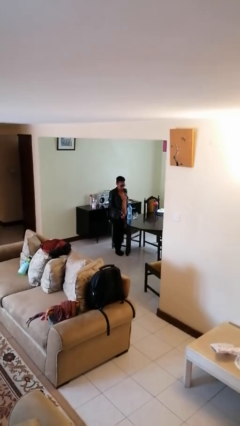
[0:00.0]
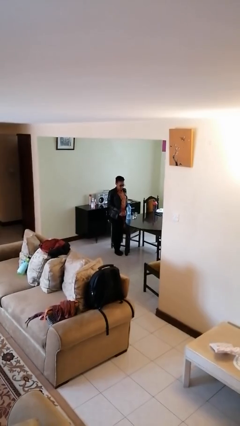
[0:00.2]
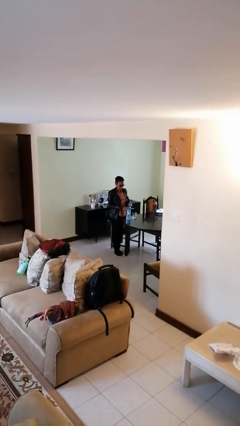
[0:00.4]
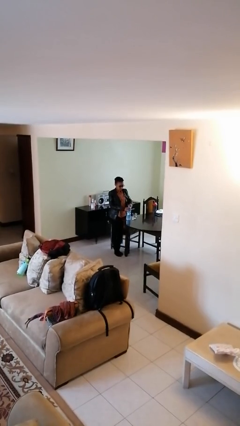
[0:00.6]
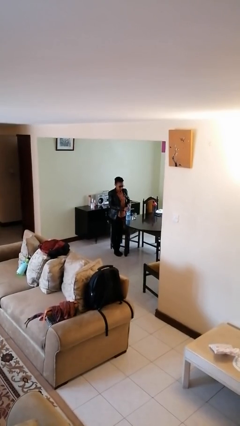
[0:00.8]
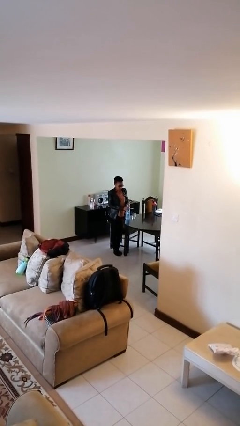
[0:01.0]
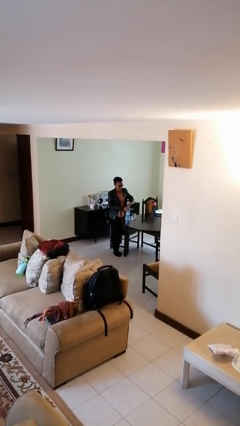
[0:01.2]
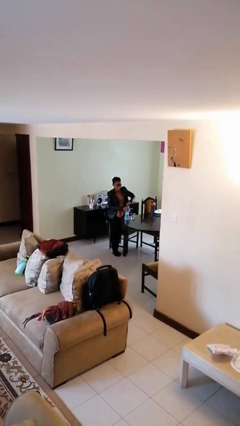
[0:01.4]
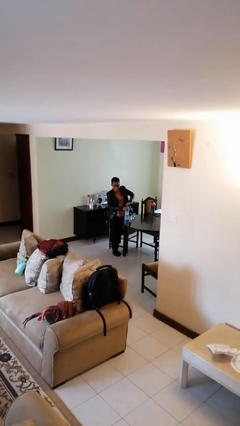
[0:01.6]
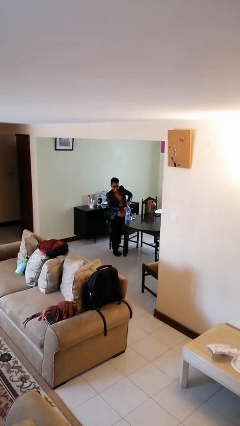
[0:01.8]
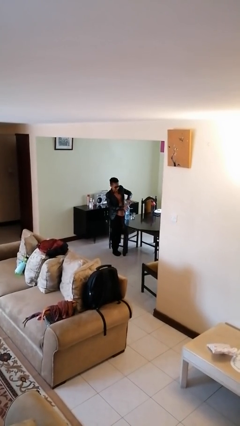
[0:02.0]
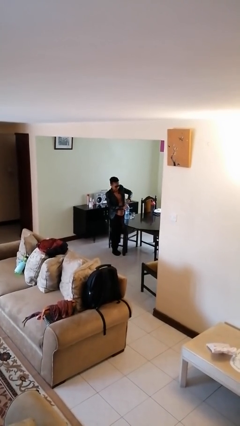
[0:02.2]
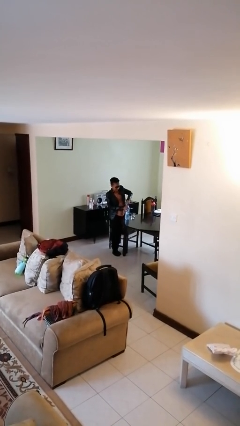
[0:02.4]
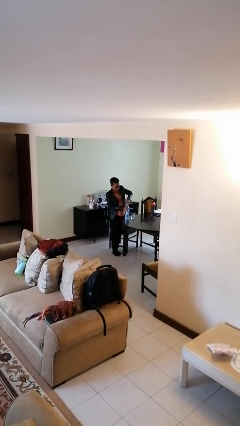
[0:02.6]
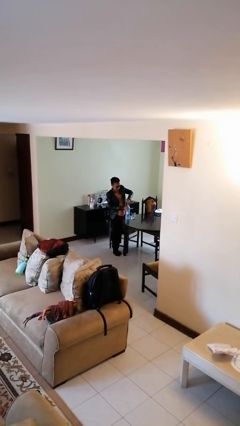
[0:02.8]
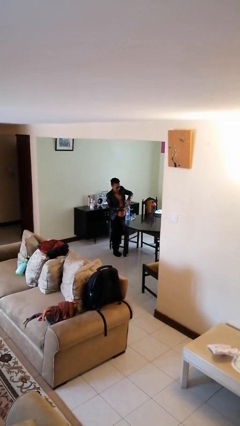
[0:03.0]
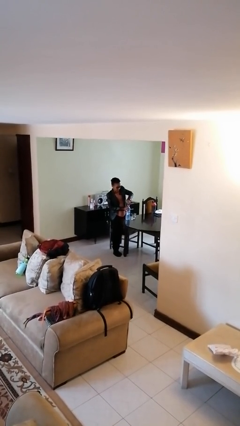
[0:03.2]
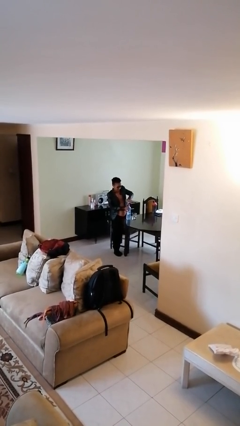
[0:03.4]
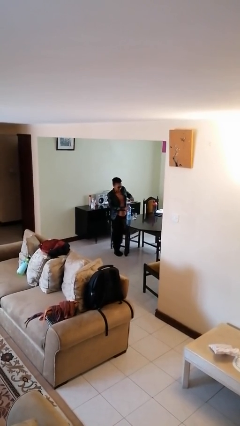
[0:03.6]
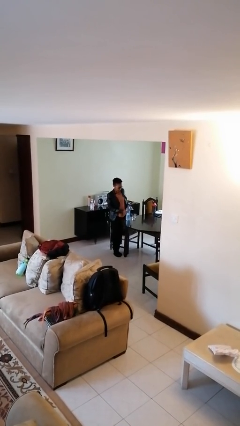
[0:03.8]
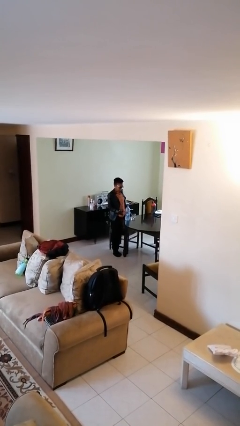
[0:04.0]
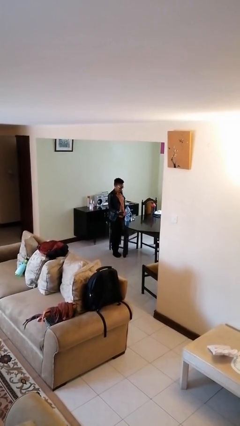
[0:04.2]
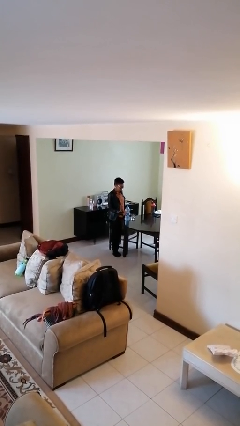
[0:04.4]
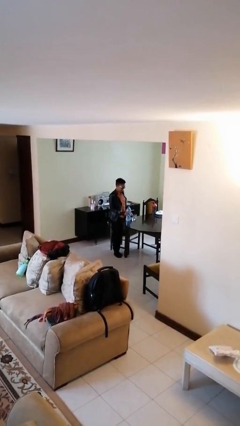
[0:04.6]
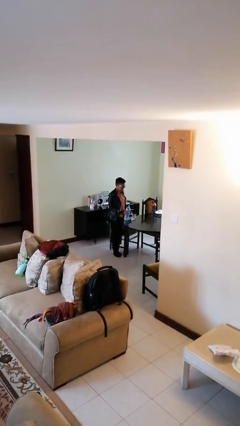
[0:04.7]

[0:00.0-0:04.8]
person unscrews lid from bottle

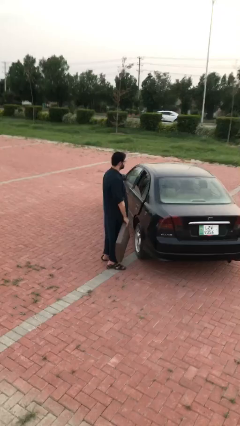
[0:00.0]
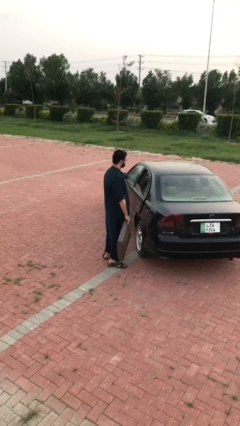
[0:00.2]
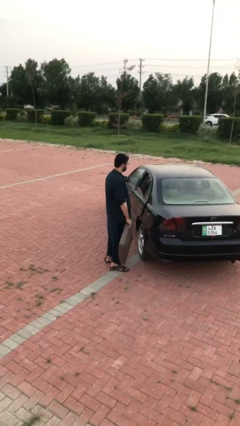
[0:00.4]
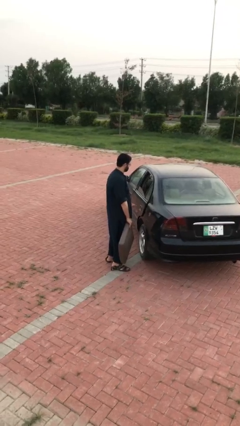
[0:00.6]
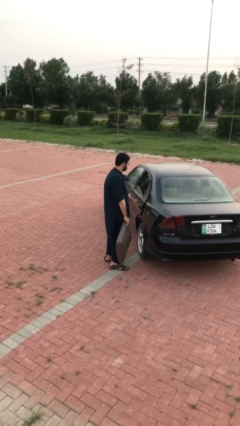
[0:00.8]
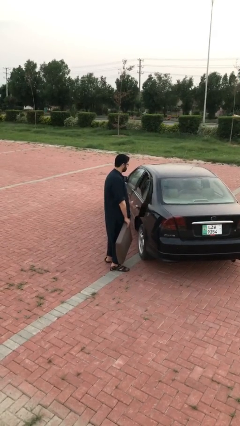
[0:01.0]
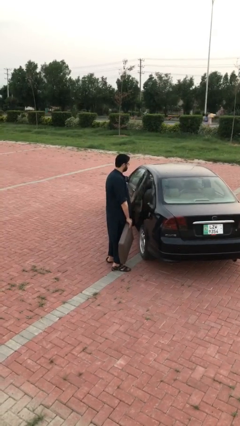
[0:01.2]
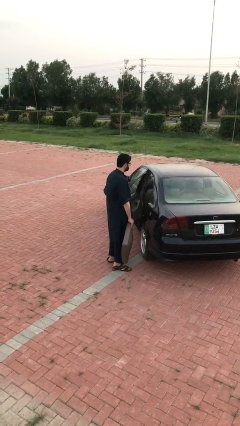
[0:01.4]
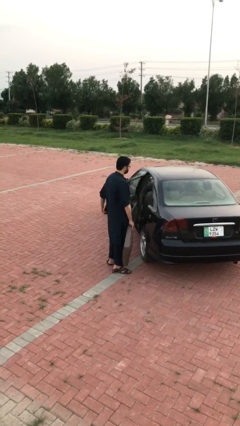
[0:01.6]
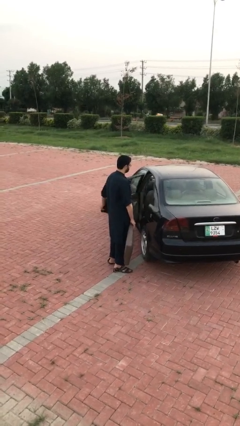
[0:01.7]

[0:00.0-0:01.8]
person opens car door

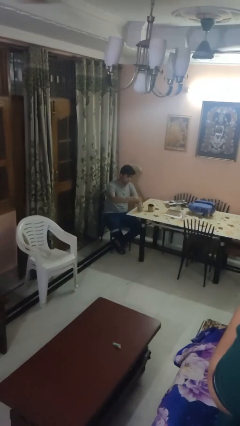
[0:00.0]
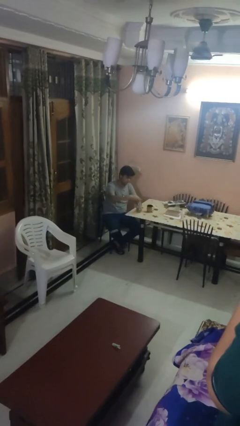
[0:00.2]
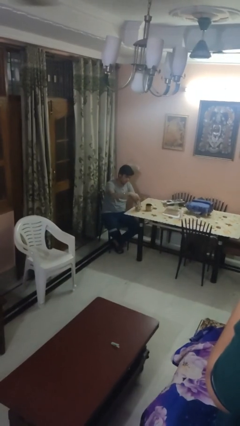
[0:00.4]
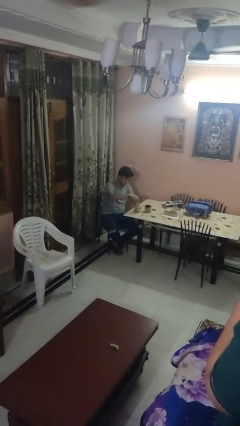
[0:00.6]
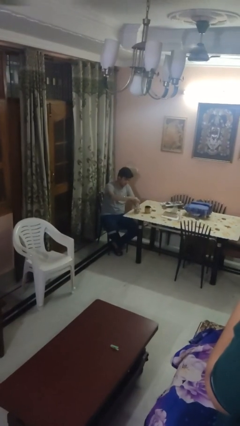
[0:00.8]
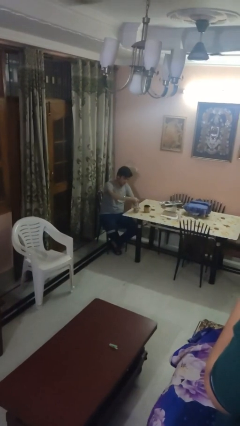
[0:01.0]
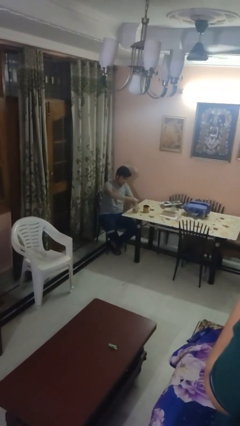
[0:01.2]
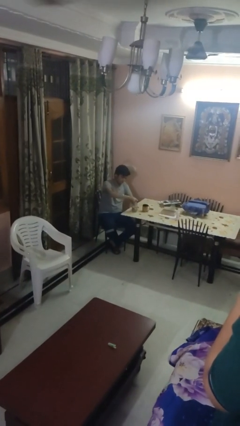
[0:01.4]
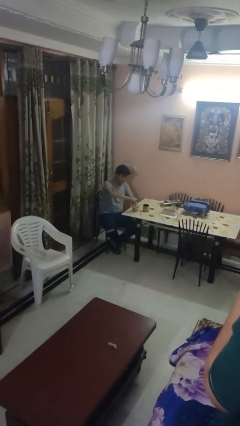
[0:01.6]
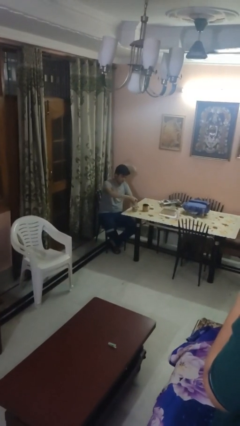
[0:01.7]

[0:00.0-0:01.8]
person screws lid to bottle

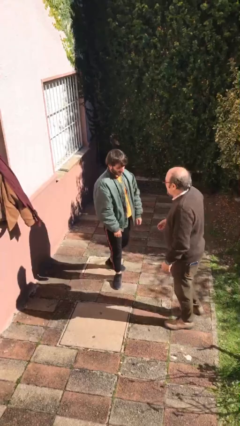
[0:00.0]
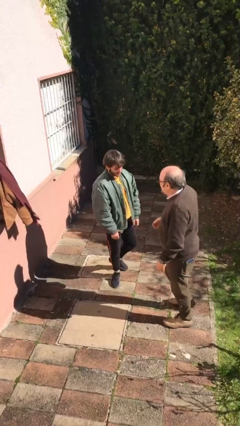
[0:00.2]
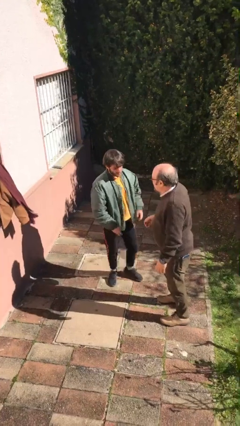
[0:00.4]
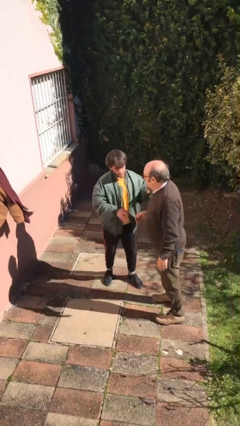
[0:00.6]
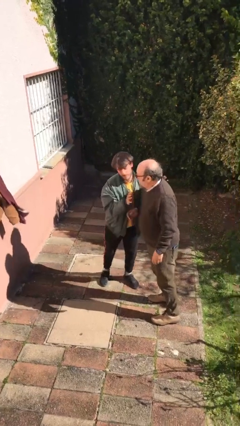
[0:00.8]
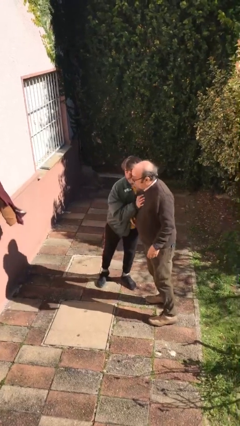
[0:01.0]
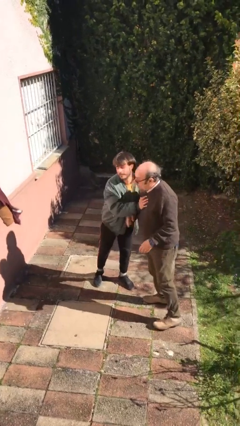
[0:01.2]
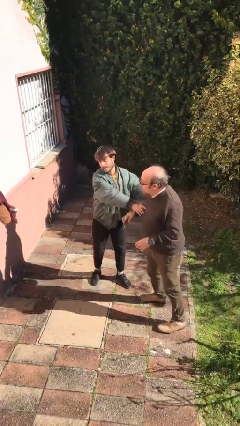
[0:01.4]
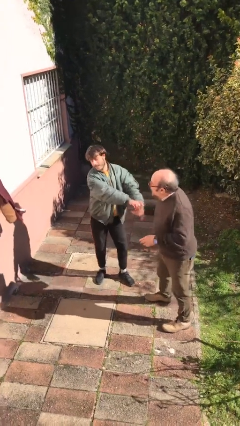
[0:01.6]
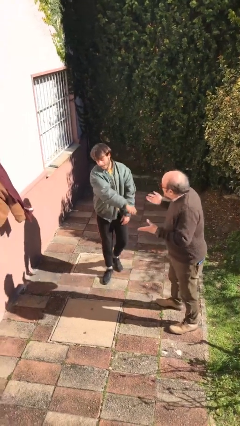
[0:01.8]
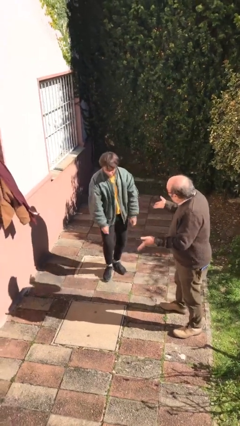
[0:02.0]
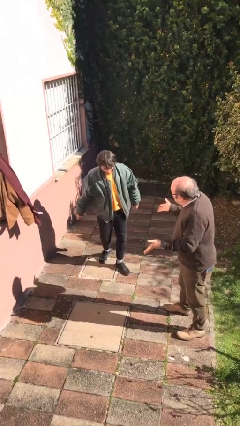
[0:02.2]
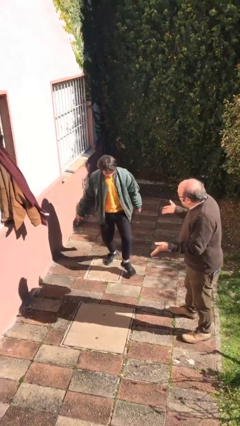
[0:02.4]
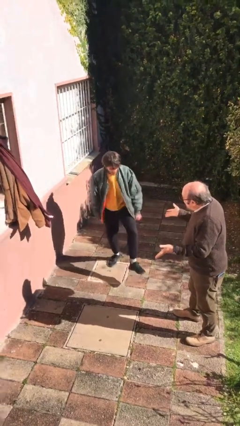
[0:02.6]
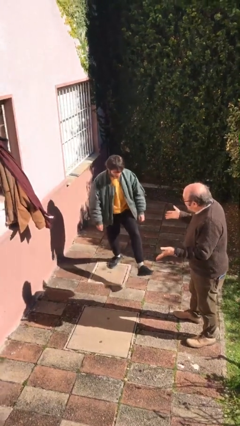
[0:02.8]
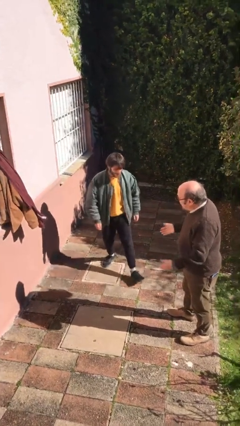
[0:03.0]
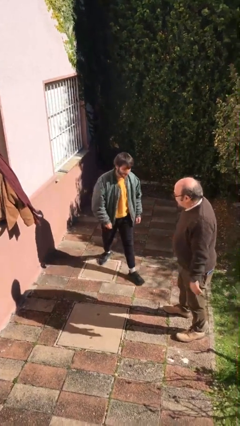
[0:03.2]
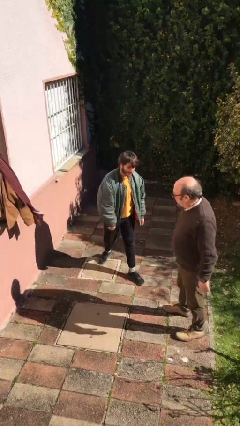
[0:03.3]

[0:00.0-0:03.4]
person shoves person

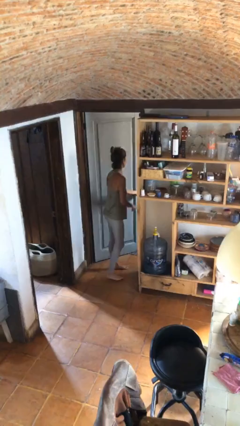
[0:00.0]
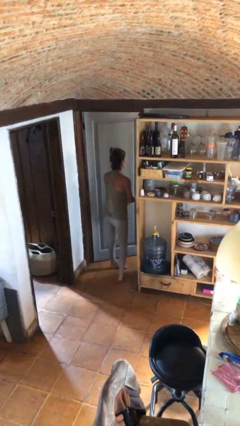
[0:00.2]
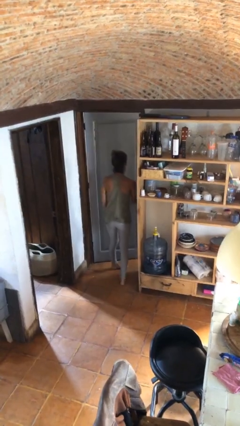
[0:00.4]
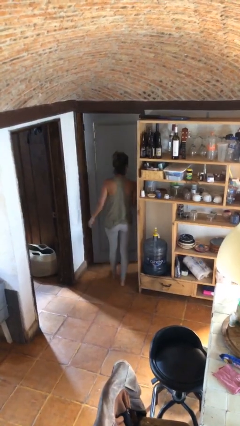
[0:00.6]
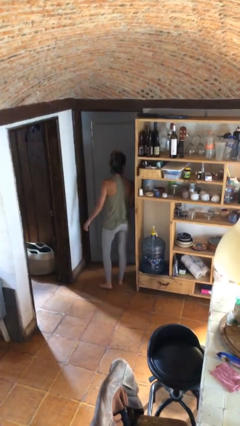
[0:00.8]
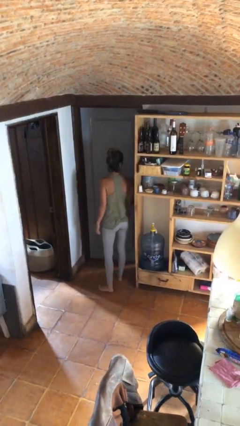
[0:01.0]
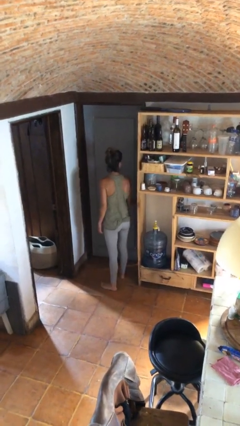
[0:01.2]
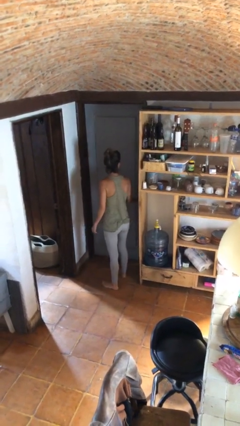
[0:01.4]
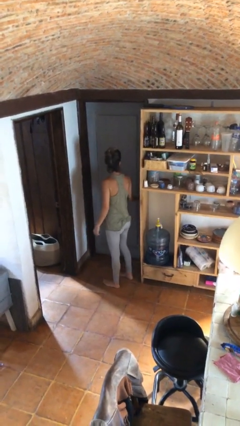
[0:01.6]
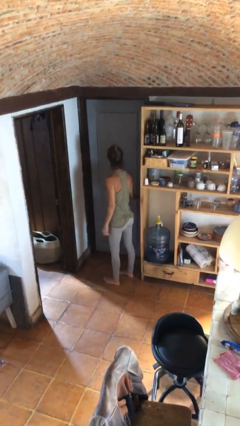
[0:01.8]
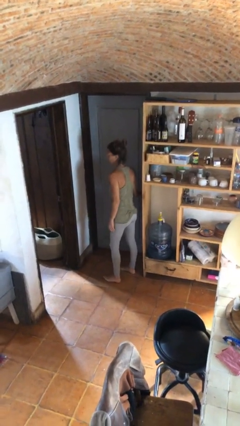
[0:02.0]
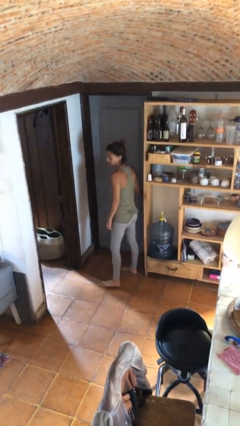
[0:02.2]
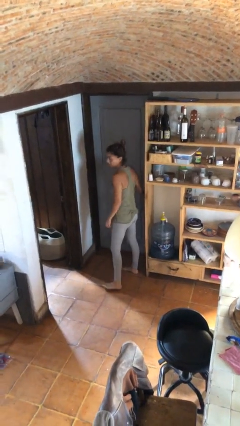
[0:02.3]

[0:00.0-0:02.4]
person closes facility door

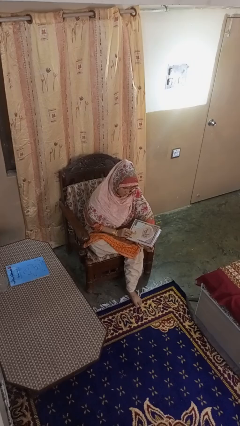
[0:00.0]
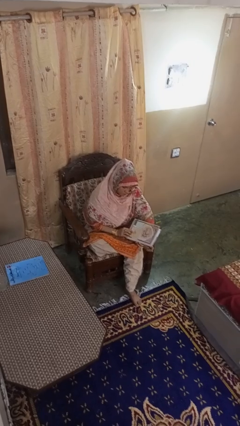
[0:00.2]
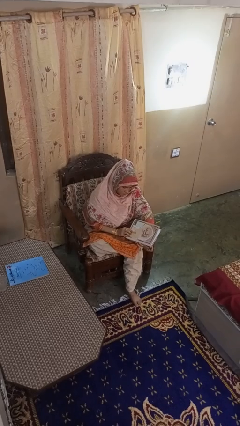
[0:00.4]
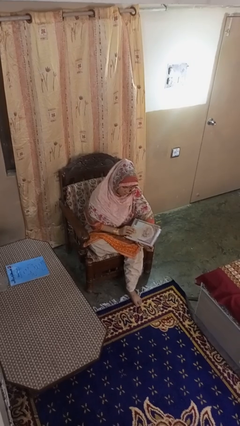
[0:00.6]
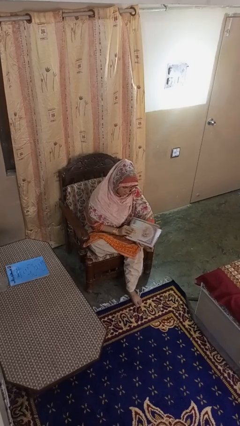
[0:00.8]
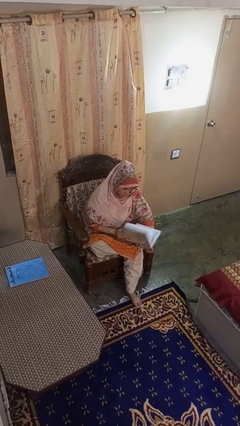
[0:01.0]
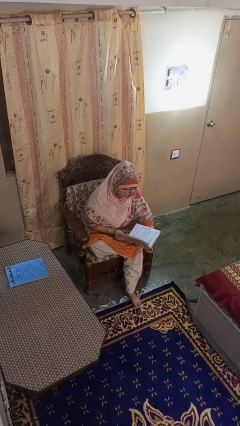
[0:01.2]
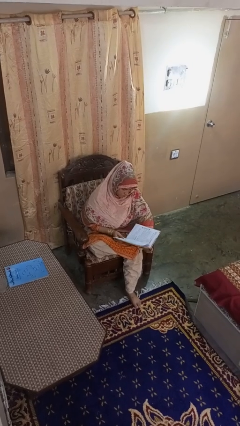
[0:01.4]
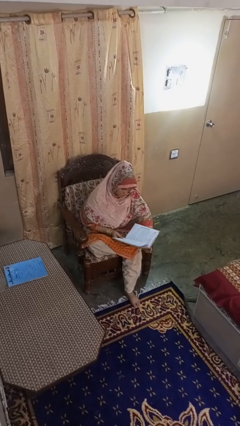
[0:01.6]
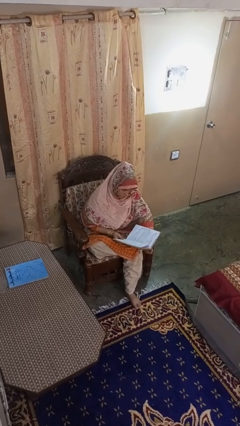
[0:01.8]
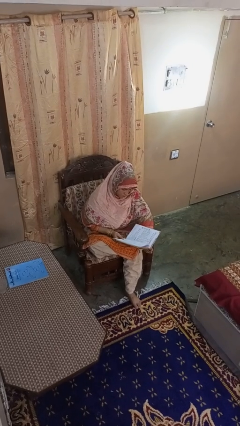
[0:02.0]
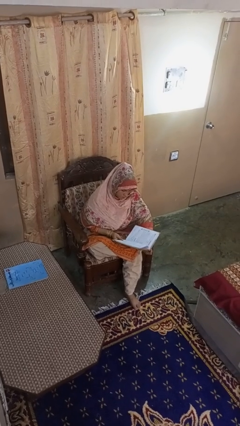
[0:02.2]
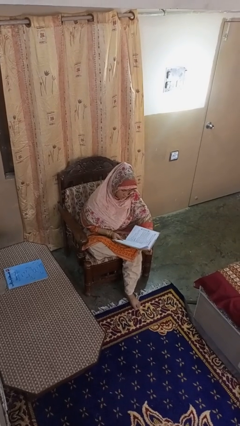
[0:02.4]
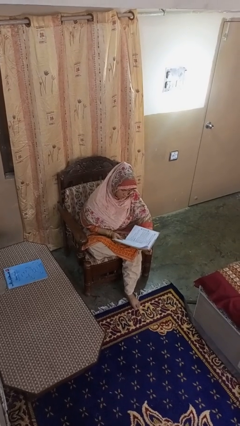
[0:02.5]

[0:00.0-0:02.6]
person reads book

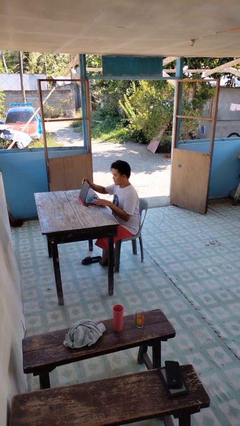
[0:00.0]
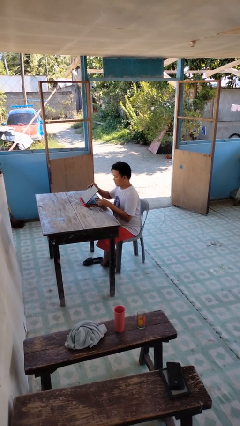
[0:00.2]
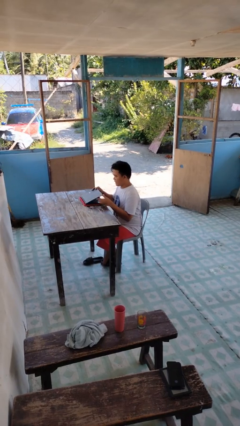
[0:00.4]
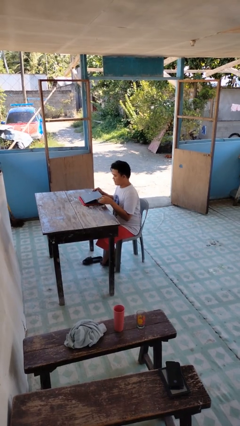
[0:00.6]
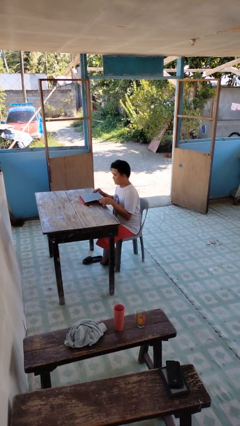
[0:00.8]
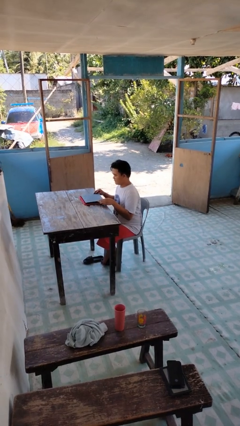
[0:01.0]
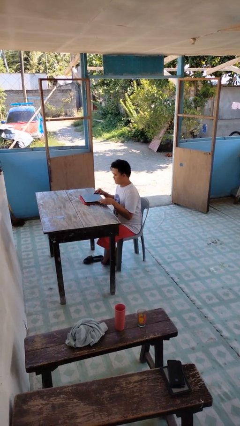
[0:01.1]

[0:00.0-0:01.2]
person closes laptop
